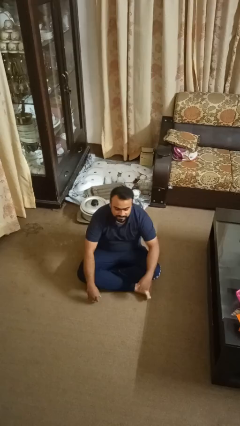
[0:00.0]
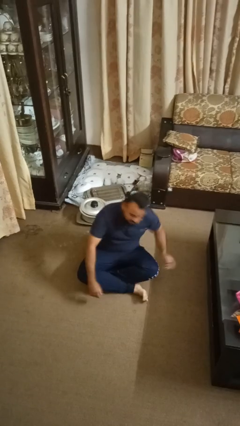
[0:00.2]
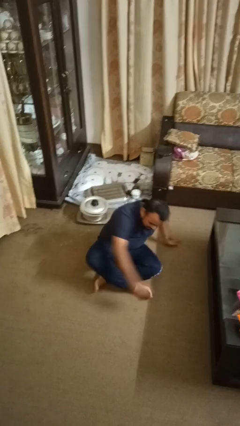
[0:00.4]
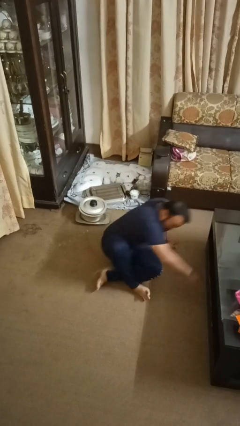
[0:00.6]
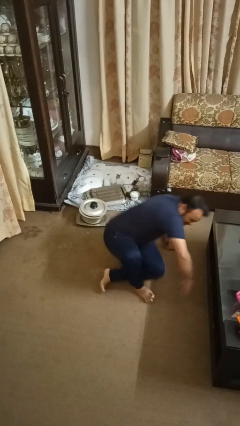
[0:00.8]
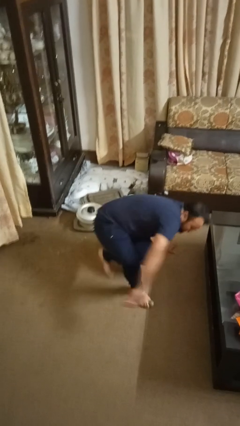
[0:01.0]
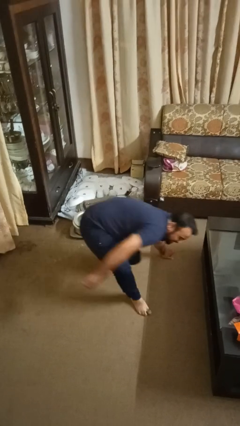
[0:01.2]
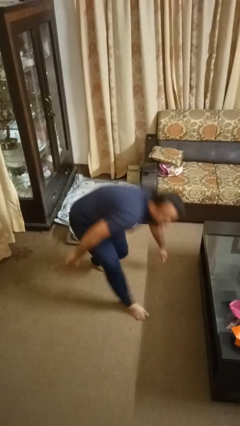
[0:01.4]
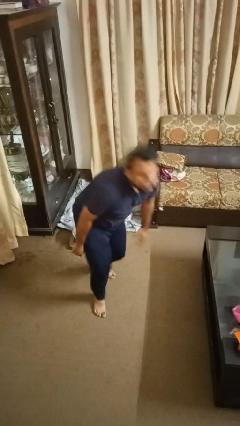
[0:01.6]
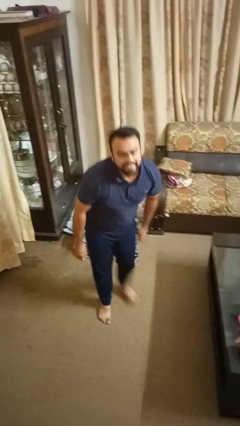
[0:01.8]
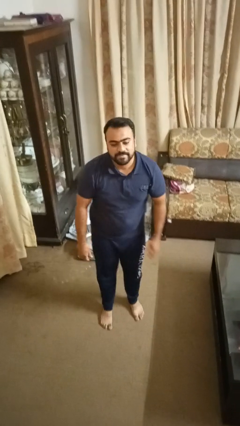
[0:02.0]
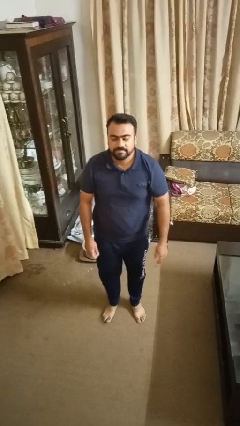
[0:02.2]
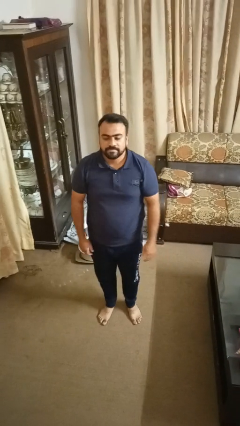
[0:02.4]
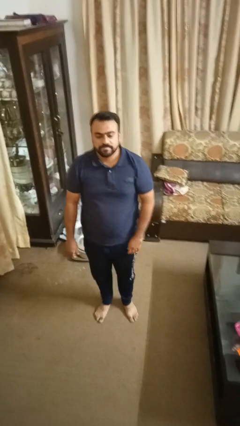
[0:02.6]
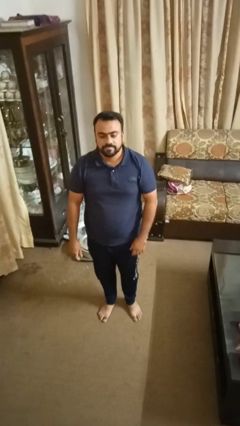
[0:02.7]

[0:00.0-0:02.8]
person stands up from floor

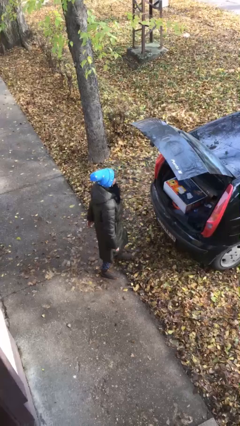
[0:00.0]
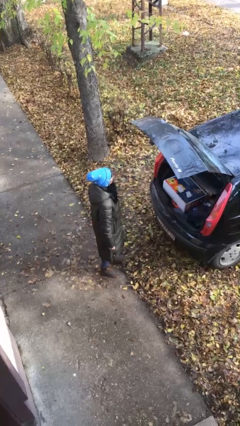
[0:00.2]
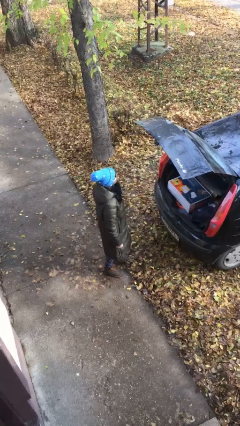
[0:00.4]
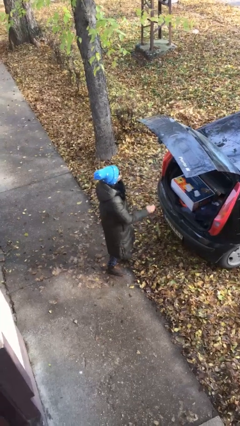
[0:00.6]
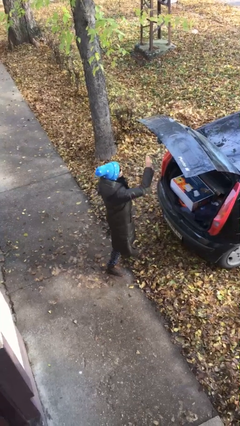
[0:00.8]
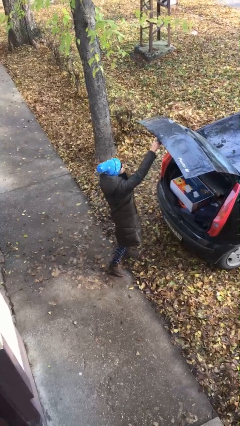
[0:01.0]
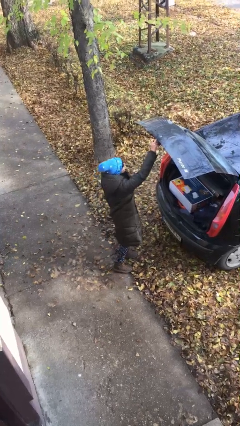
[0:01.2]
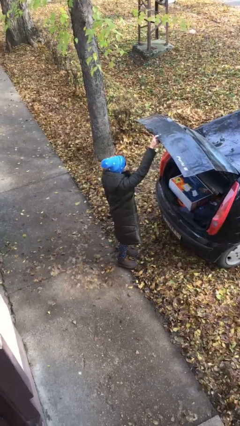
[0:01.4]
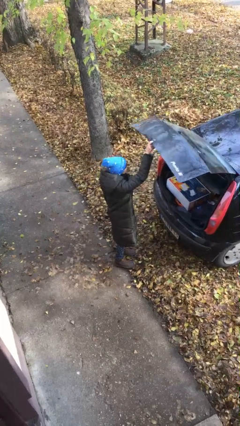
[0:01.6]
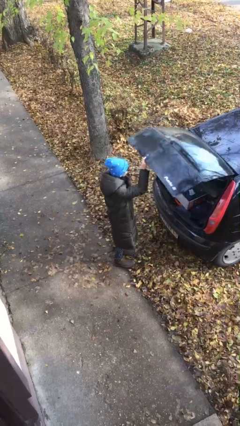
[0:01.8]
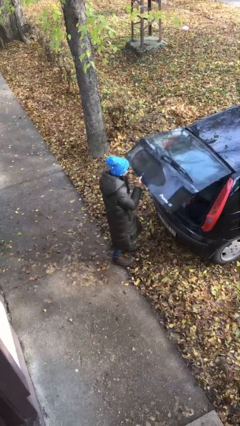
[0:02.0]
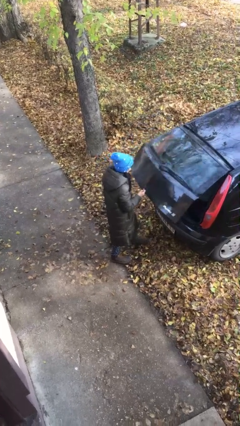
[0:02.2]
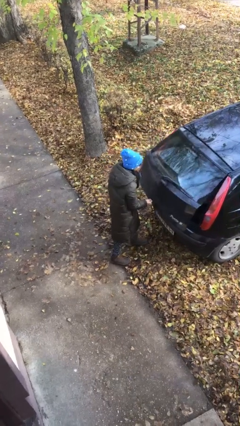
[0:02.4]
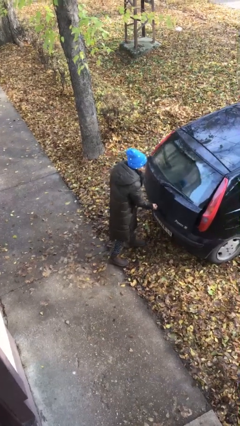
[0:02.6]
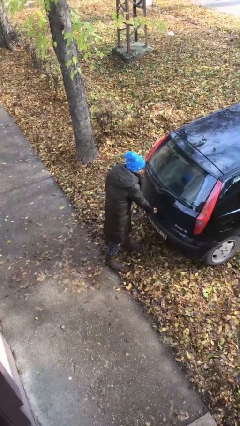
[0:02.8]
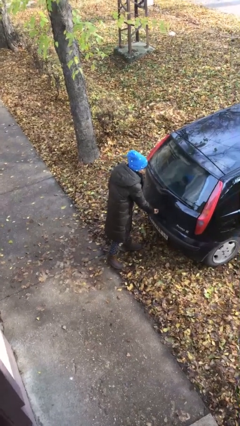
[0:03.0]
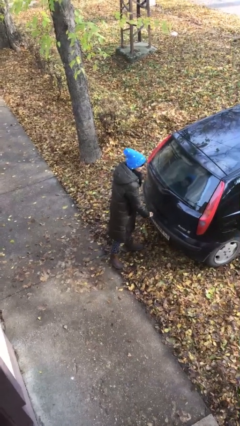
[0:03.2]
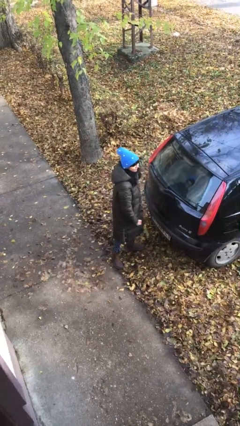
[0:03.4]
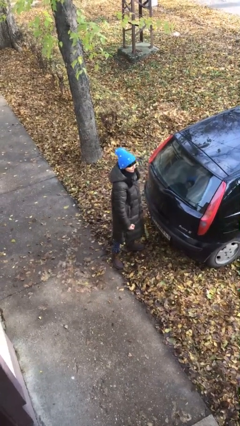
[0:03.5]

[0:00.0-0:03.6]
person closes car trunk

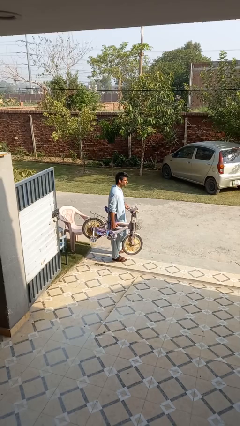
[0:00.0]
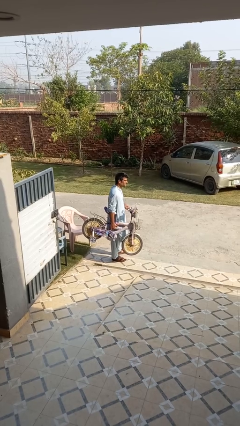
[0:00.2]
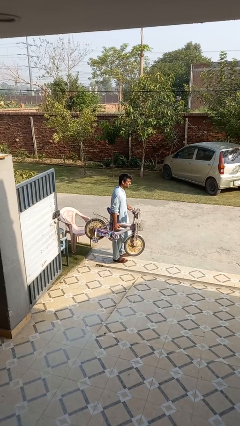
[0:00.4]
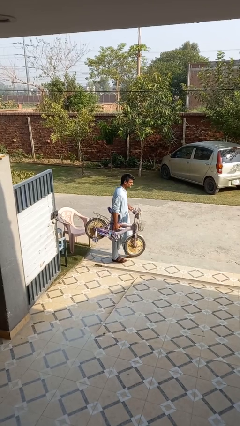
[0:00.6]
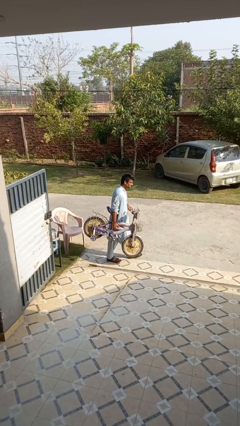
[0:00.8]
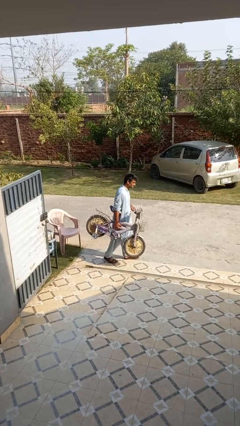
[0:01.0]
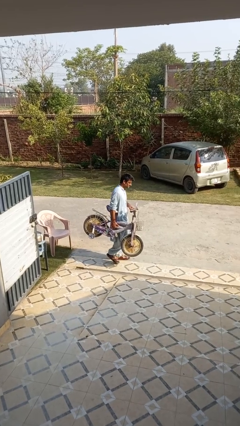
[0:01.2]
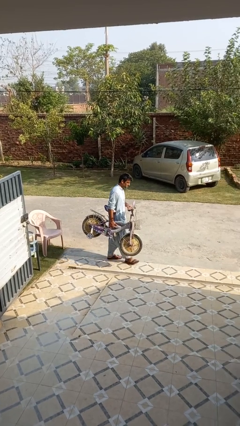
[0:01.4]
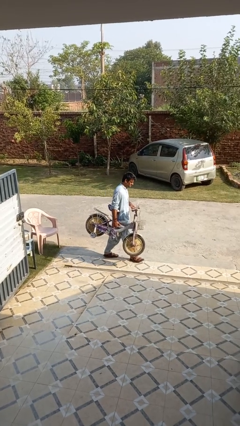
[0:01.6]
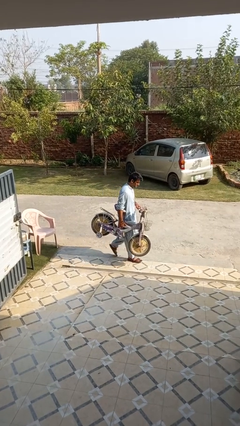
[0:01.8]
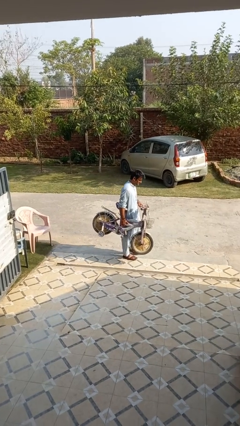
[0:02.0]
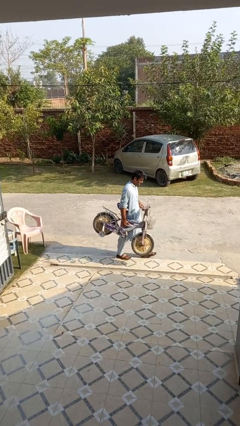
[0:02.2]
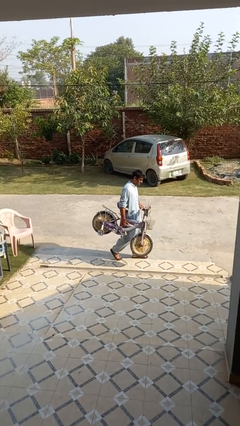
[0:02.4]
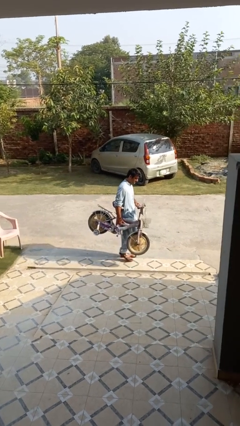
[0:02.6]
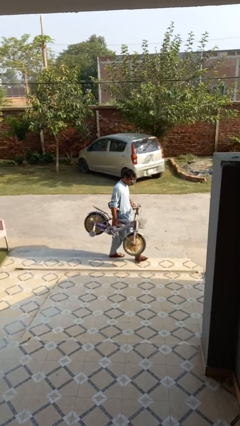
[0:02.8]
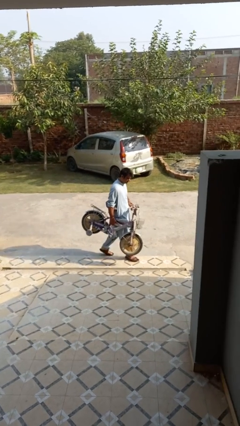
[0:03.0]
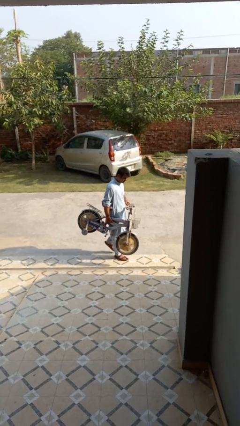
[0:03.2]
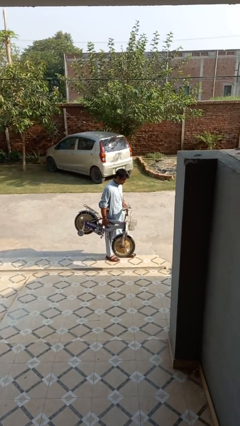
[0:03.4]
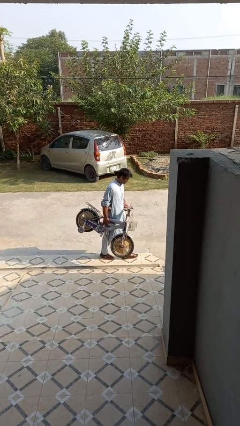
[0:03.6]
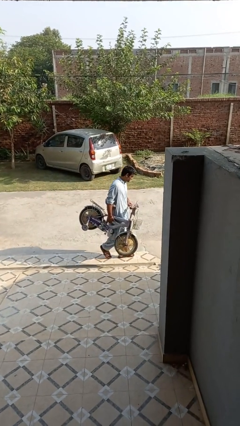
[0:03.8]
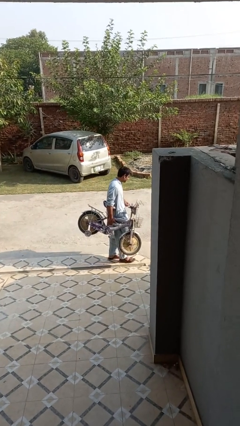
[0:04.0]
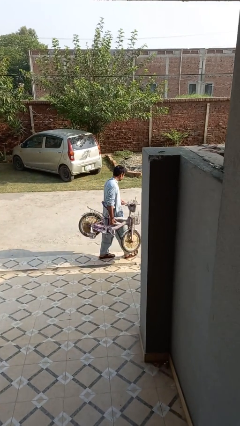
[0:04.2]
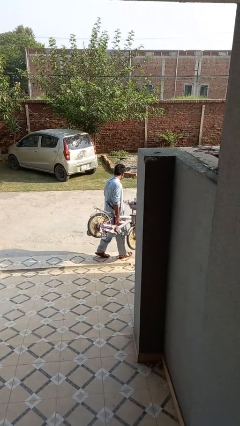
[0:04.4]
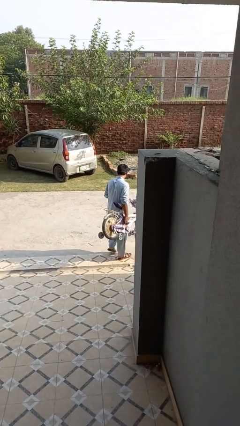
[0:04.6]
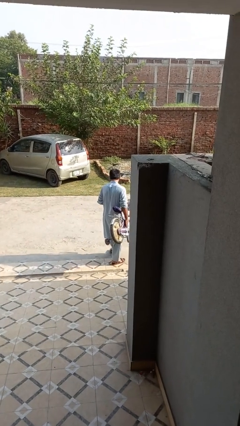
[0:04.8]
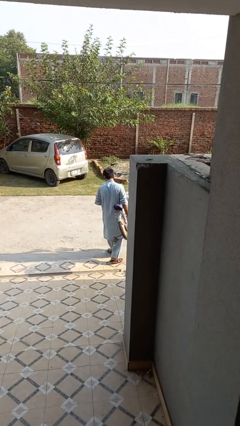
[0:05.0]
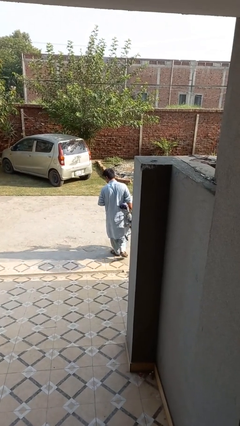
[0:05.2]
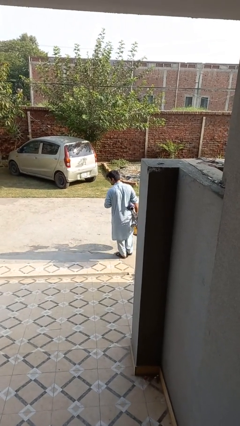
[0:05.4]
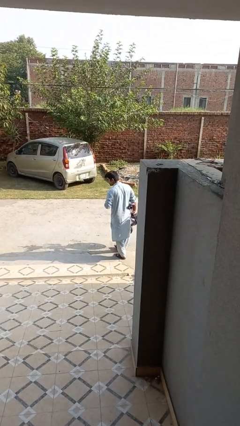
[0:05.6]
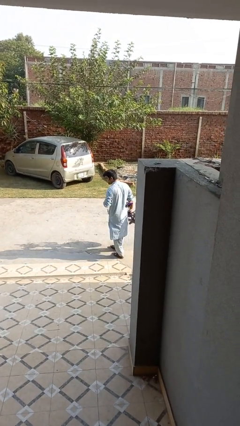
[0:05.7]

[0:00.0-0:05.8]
person carries bicycle

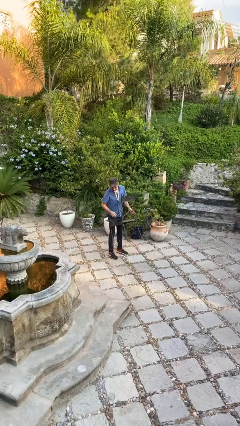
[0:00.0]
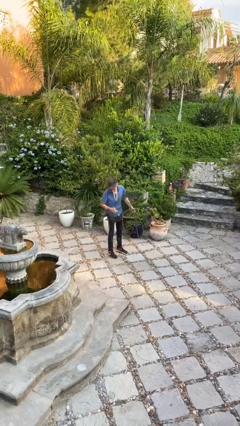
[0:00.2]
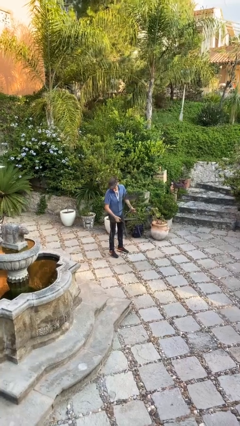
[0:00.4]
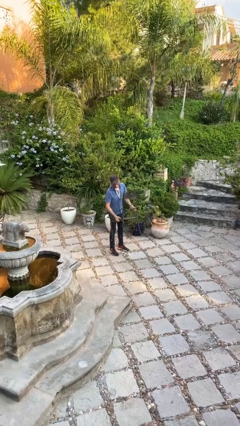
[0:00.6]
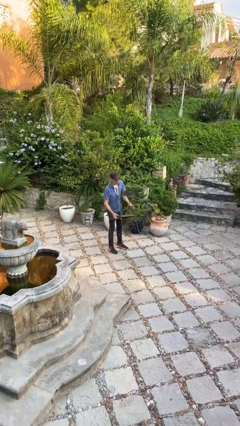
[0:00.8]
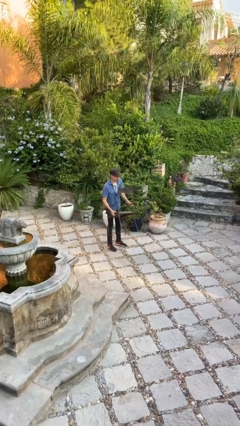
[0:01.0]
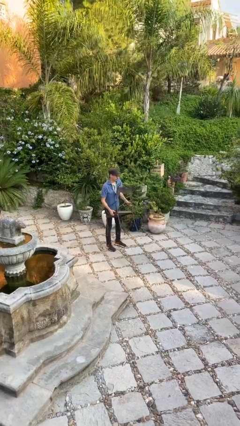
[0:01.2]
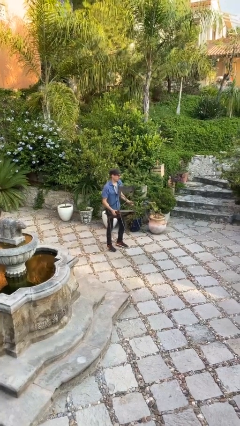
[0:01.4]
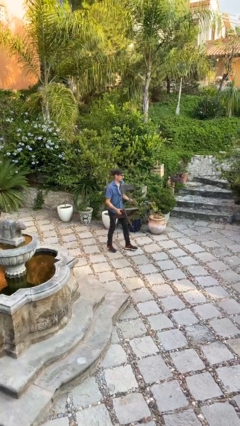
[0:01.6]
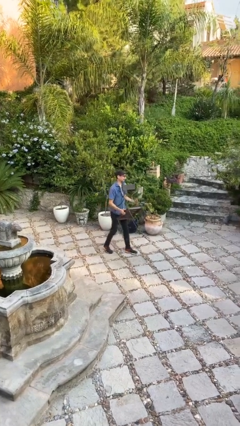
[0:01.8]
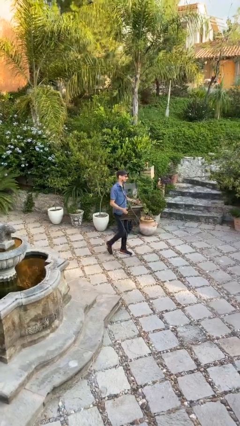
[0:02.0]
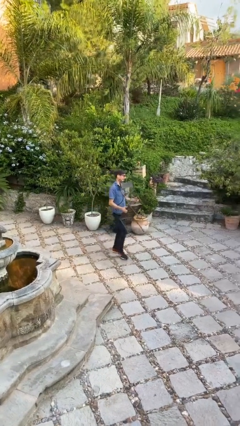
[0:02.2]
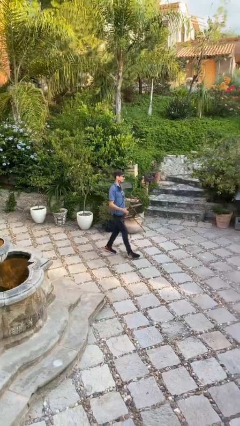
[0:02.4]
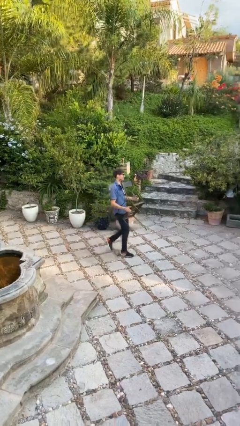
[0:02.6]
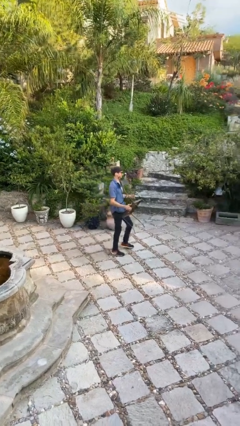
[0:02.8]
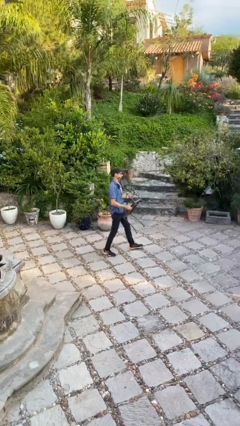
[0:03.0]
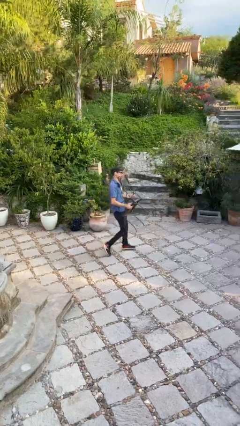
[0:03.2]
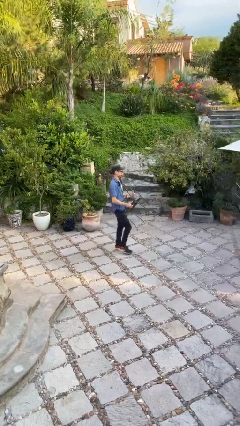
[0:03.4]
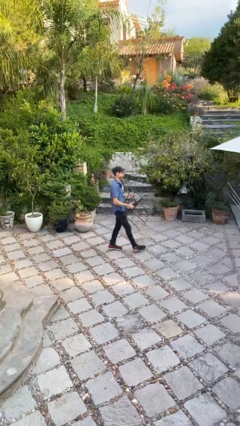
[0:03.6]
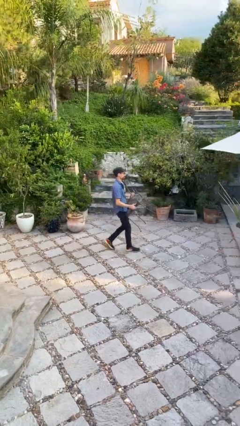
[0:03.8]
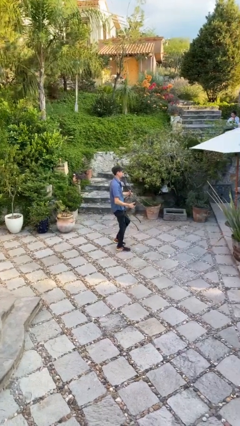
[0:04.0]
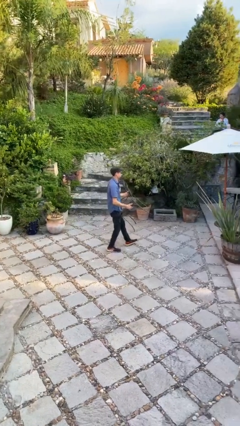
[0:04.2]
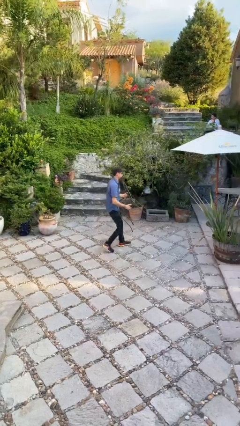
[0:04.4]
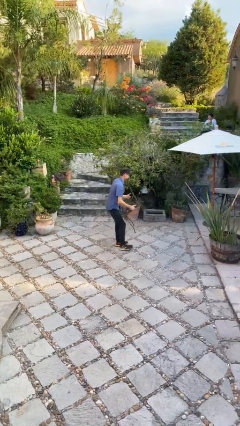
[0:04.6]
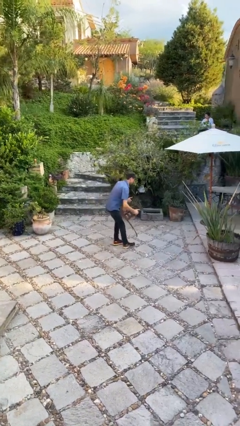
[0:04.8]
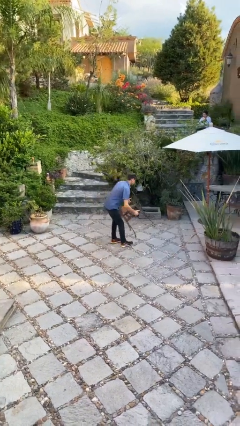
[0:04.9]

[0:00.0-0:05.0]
person carries heavy object

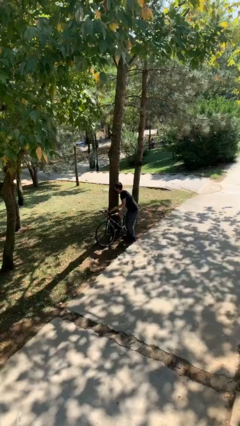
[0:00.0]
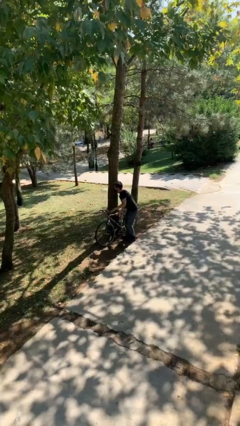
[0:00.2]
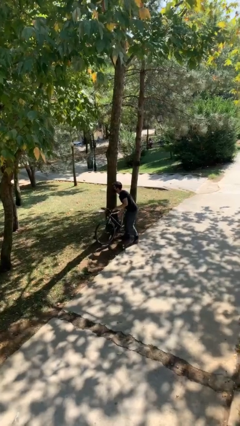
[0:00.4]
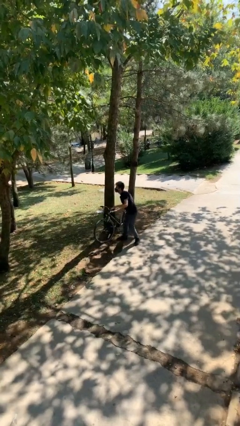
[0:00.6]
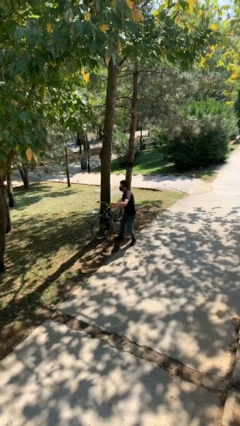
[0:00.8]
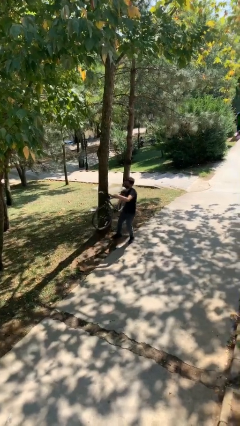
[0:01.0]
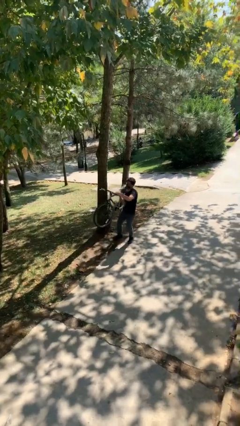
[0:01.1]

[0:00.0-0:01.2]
person picks up object from floor
